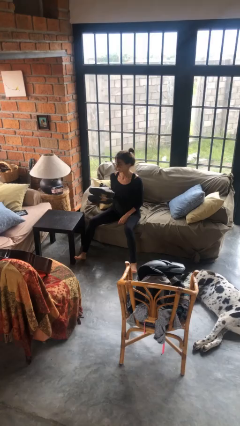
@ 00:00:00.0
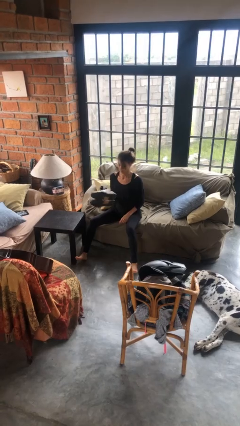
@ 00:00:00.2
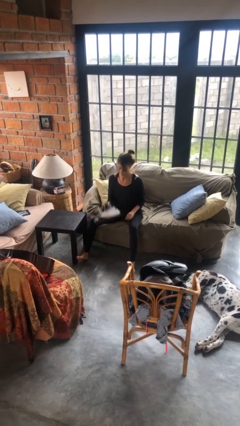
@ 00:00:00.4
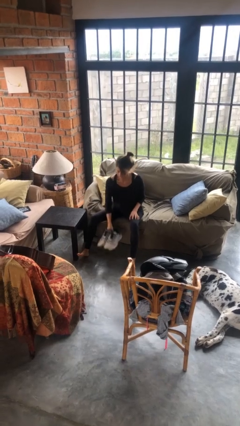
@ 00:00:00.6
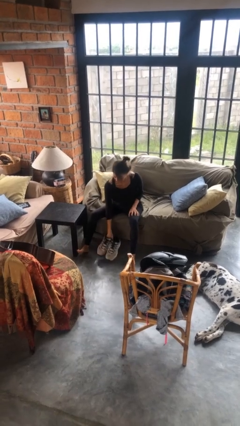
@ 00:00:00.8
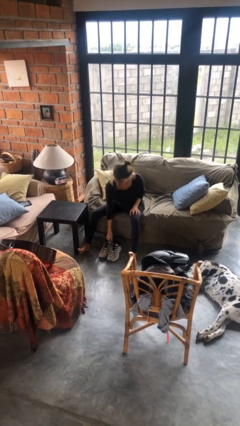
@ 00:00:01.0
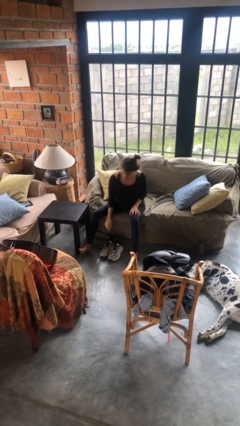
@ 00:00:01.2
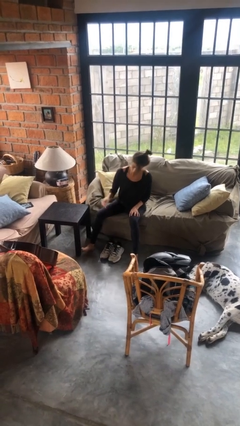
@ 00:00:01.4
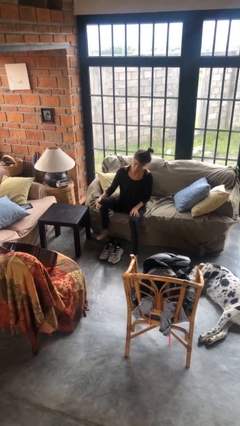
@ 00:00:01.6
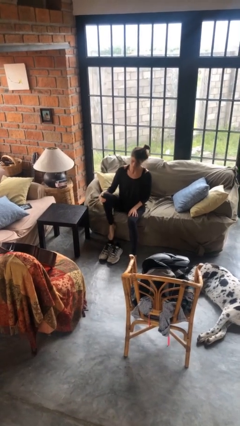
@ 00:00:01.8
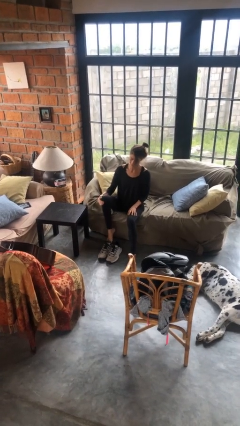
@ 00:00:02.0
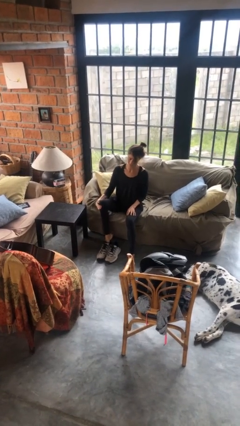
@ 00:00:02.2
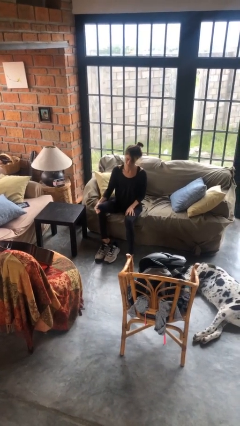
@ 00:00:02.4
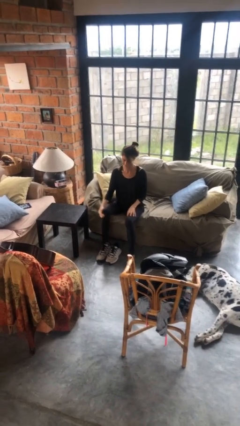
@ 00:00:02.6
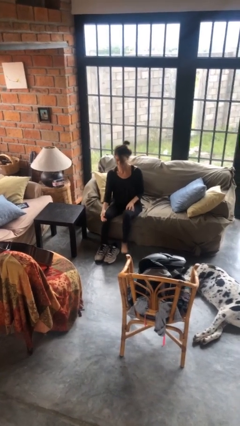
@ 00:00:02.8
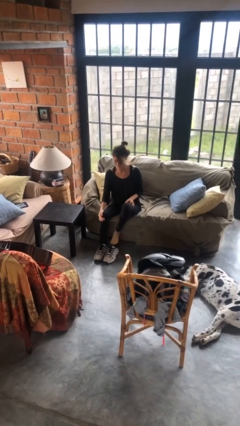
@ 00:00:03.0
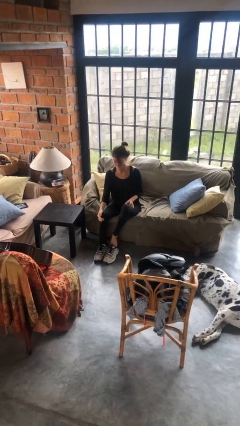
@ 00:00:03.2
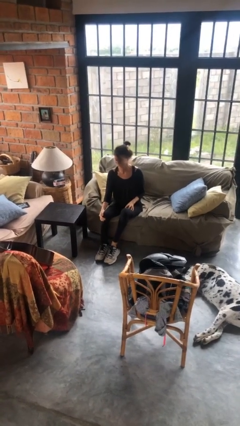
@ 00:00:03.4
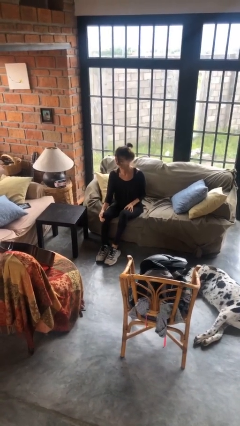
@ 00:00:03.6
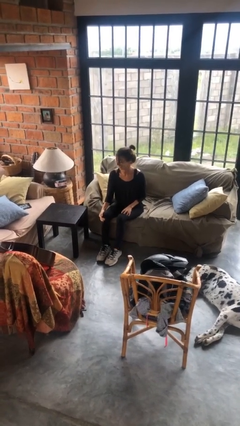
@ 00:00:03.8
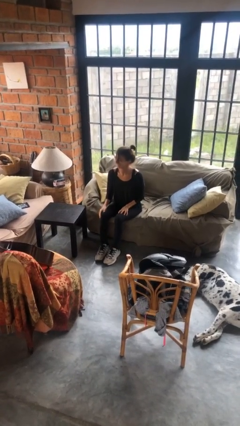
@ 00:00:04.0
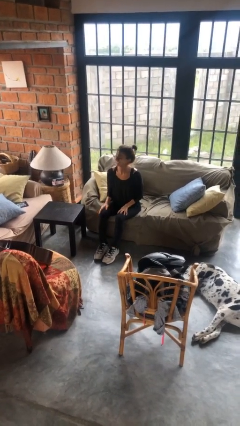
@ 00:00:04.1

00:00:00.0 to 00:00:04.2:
person puts on shoes

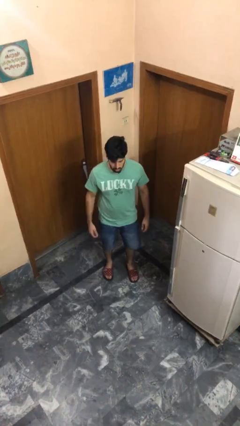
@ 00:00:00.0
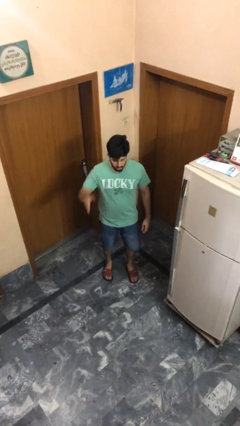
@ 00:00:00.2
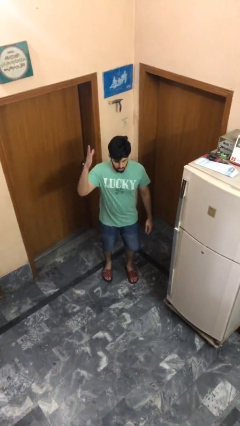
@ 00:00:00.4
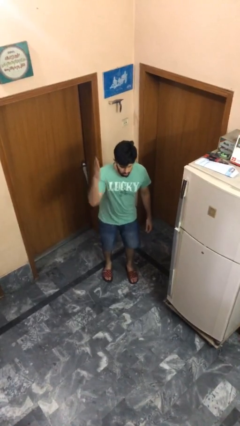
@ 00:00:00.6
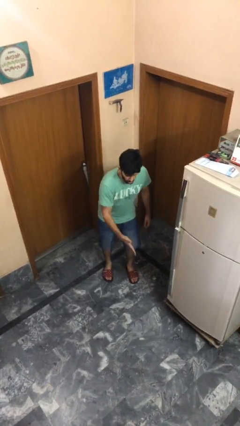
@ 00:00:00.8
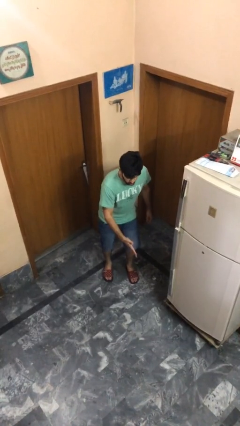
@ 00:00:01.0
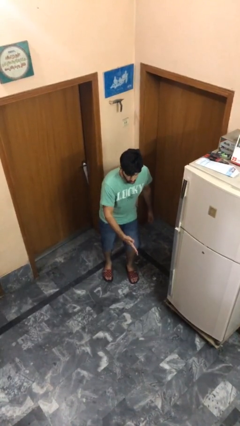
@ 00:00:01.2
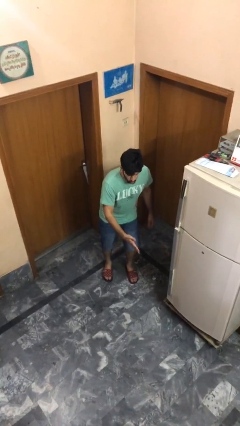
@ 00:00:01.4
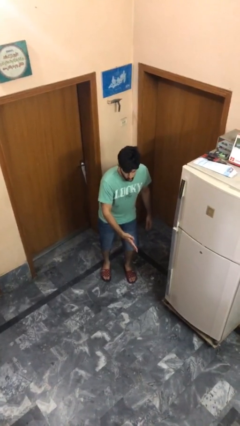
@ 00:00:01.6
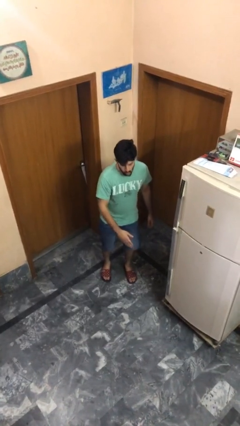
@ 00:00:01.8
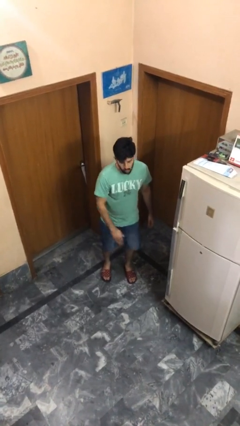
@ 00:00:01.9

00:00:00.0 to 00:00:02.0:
person karate chop

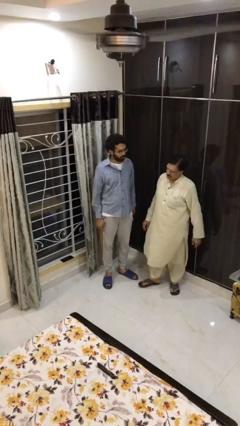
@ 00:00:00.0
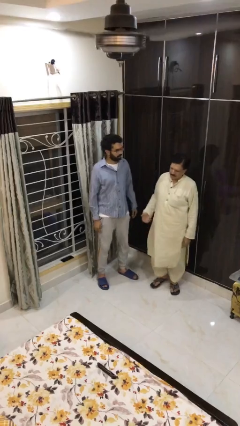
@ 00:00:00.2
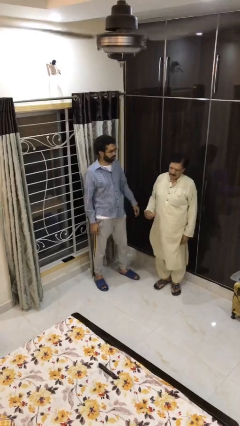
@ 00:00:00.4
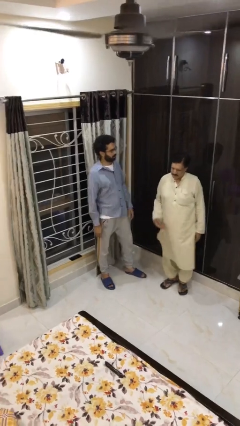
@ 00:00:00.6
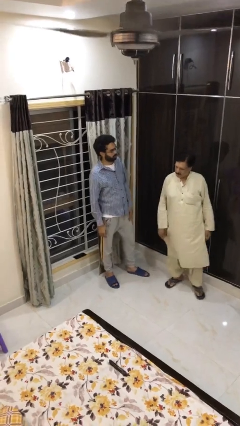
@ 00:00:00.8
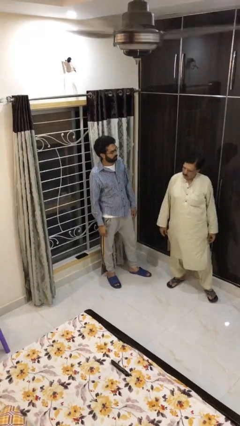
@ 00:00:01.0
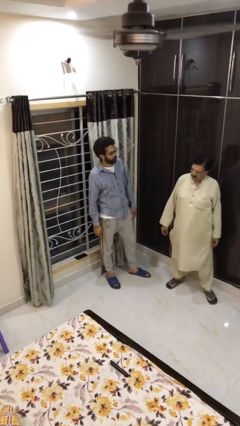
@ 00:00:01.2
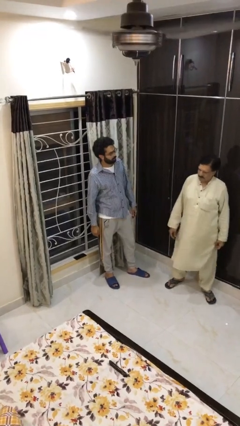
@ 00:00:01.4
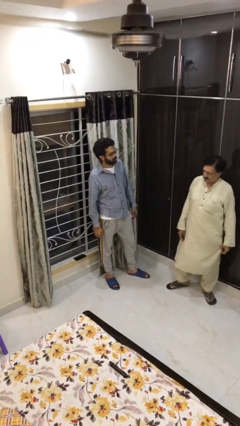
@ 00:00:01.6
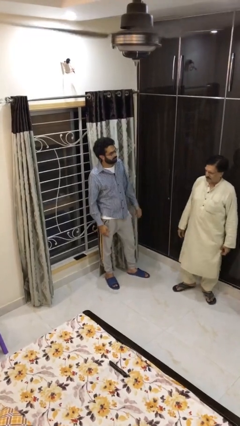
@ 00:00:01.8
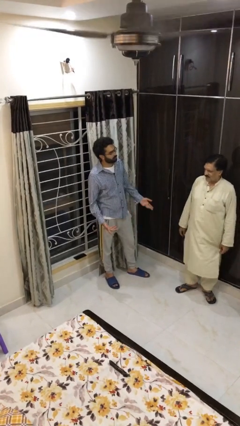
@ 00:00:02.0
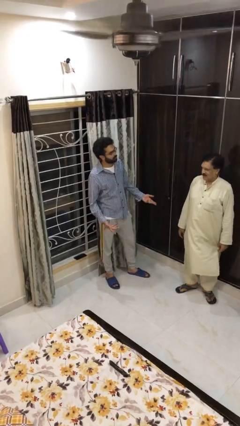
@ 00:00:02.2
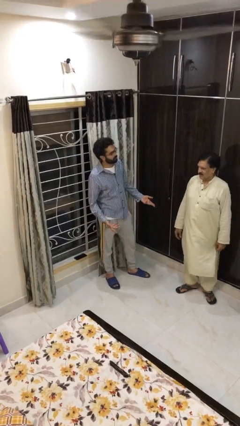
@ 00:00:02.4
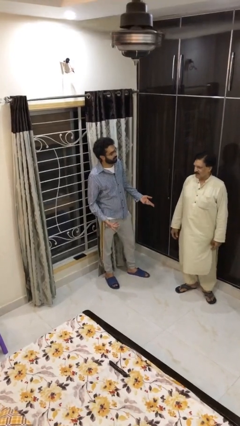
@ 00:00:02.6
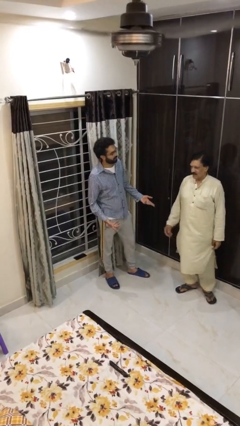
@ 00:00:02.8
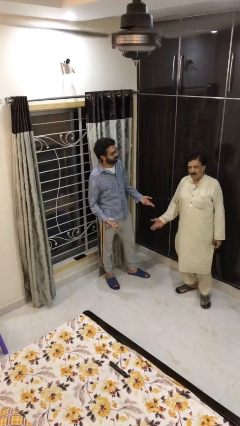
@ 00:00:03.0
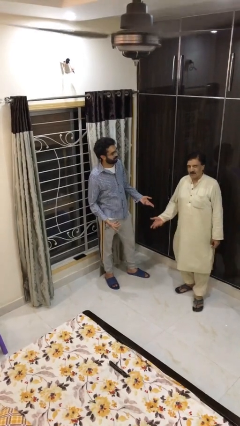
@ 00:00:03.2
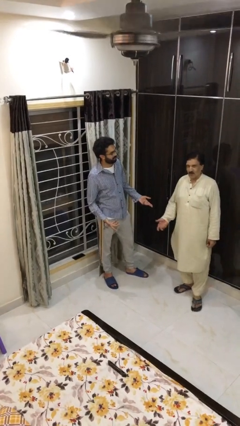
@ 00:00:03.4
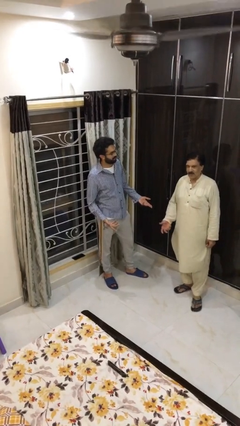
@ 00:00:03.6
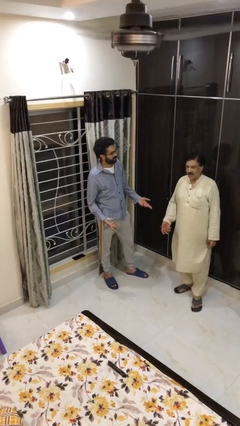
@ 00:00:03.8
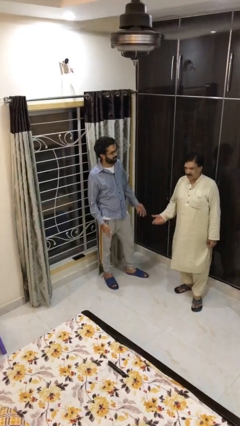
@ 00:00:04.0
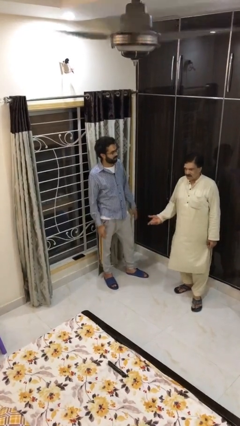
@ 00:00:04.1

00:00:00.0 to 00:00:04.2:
person talks to person

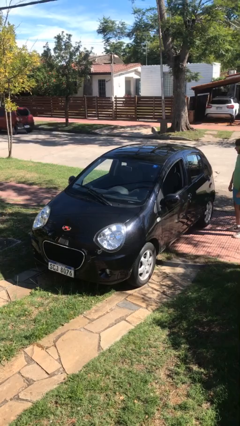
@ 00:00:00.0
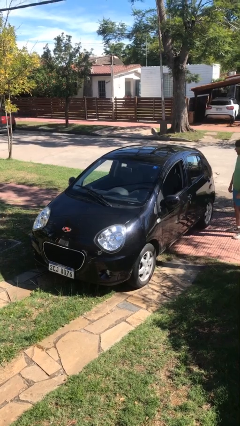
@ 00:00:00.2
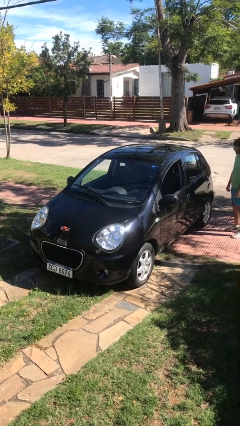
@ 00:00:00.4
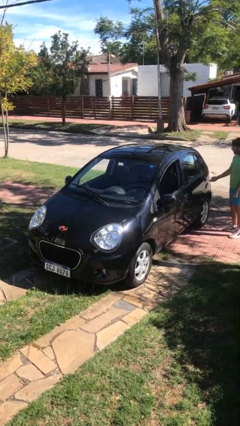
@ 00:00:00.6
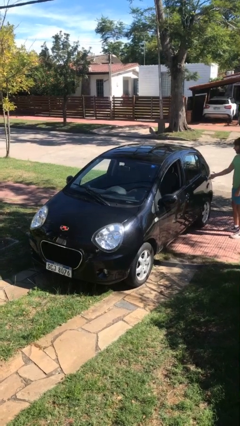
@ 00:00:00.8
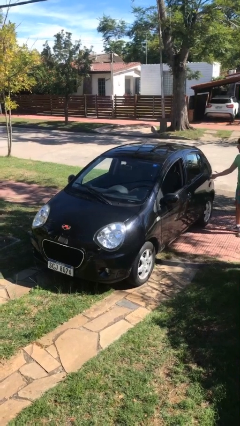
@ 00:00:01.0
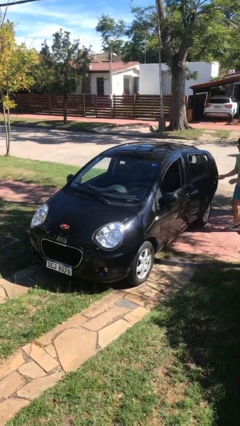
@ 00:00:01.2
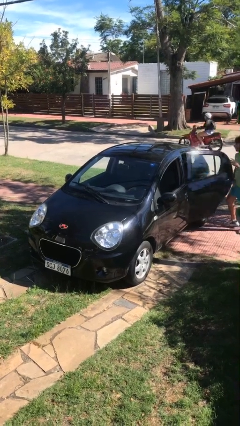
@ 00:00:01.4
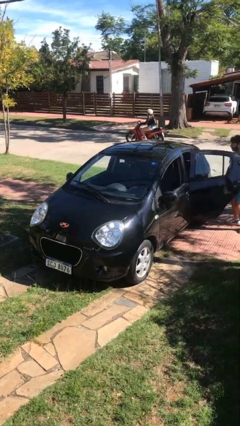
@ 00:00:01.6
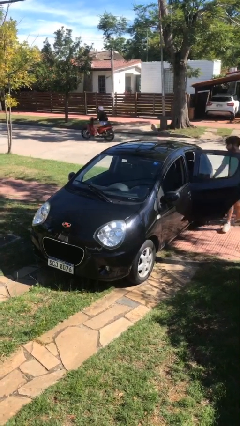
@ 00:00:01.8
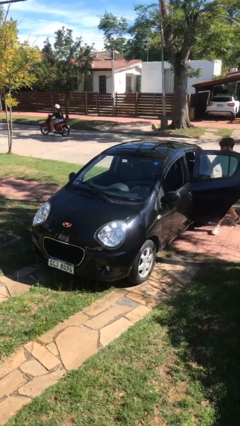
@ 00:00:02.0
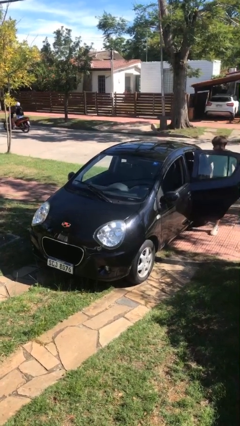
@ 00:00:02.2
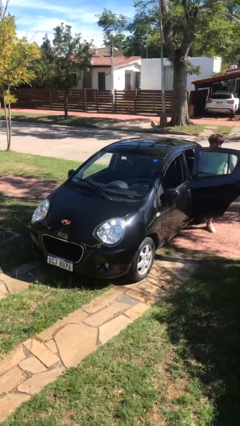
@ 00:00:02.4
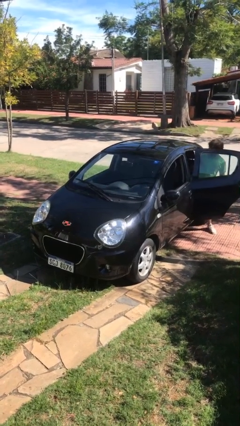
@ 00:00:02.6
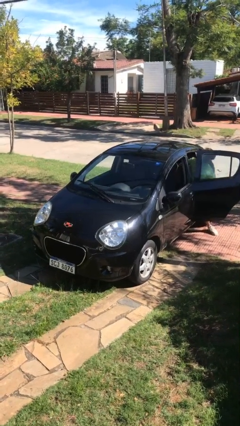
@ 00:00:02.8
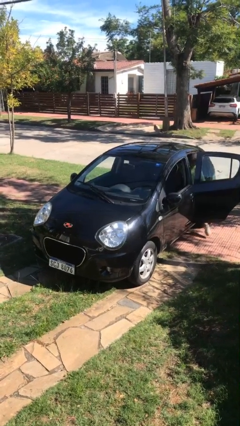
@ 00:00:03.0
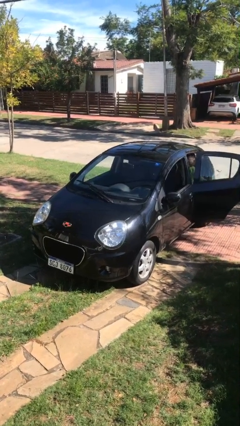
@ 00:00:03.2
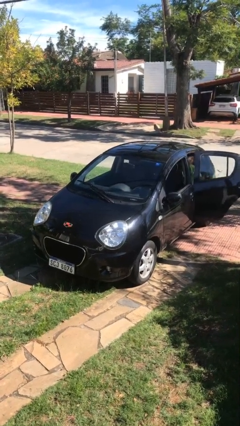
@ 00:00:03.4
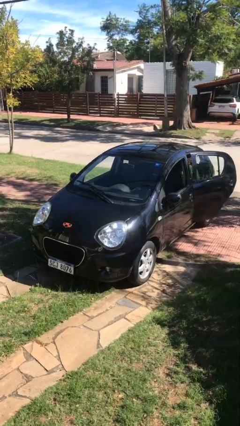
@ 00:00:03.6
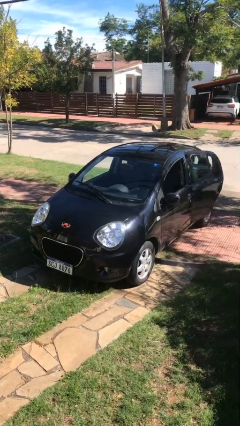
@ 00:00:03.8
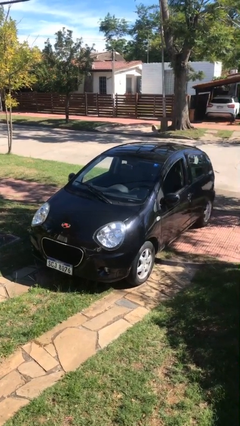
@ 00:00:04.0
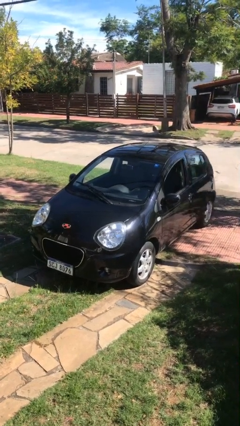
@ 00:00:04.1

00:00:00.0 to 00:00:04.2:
car picks up person

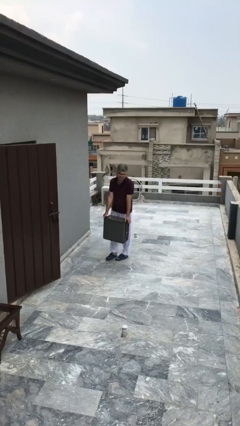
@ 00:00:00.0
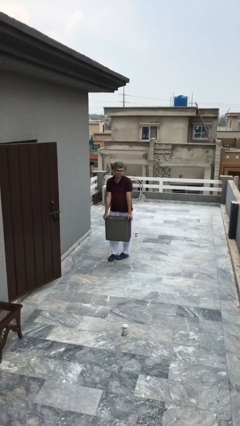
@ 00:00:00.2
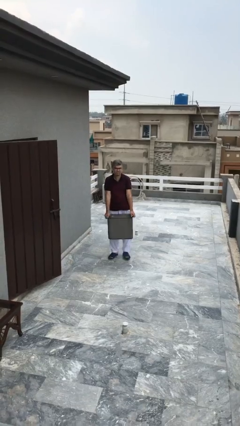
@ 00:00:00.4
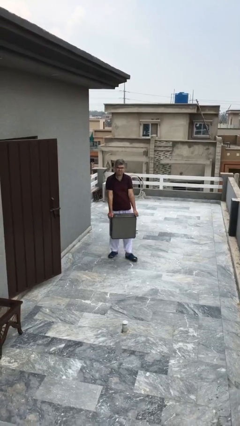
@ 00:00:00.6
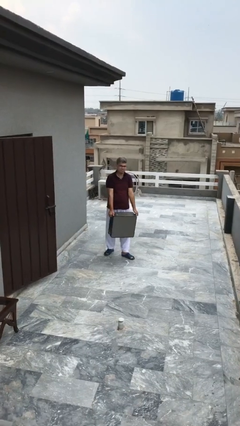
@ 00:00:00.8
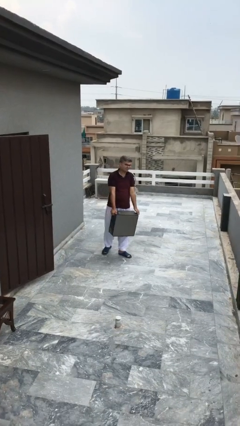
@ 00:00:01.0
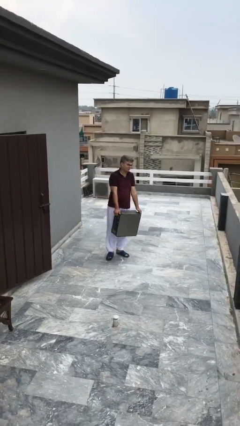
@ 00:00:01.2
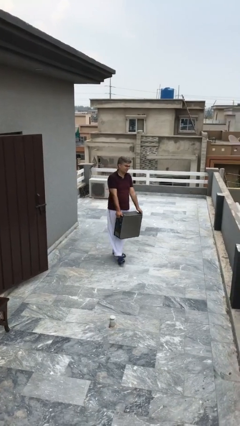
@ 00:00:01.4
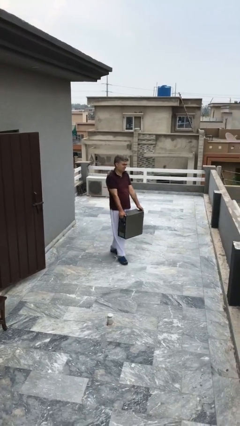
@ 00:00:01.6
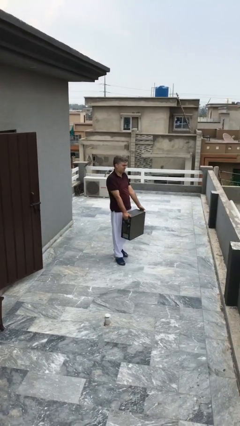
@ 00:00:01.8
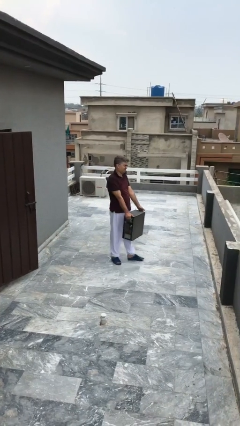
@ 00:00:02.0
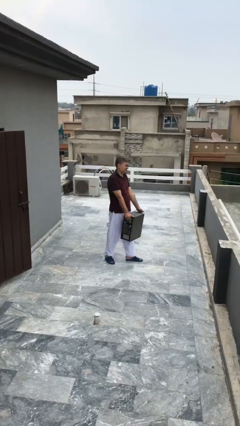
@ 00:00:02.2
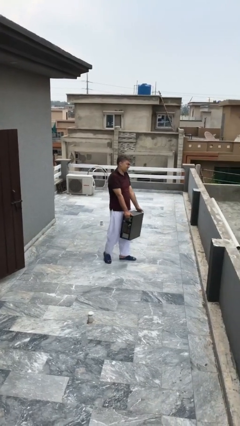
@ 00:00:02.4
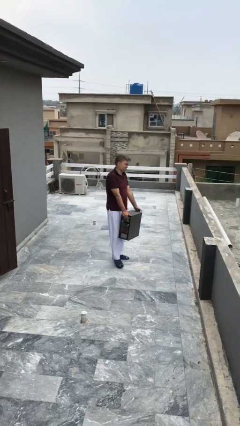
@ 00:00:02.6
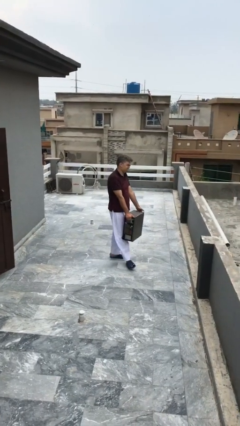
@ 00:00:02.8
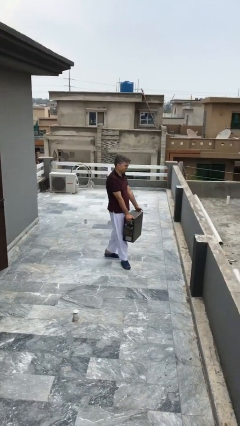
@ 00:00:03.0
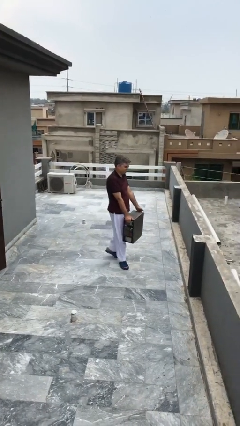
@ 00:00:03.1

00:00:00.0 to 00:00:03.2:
person carries heavy object
